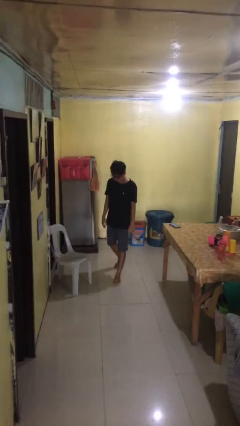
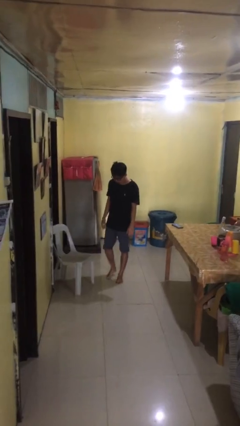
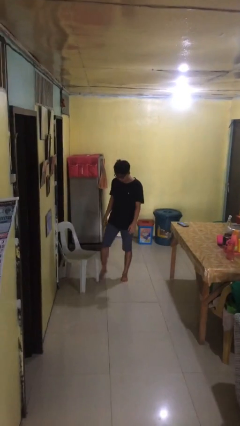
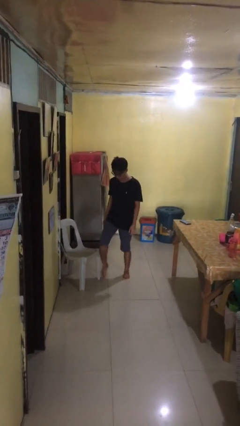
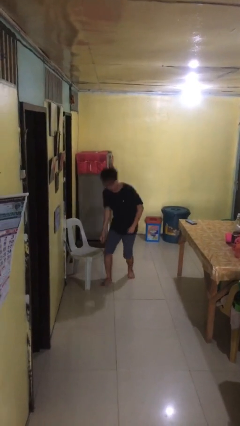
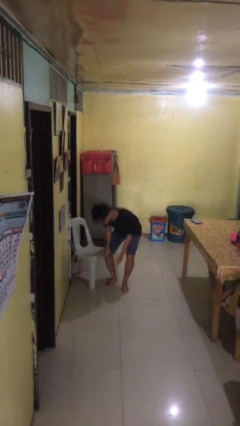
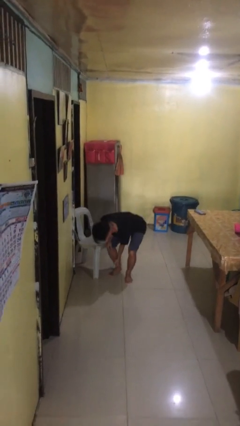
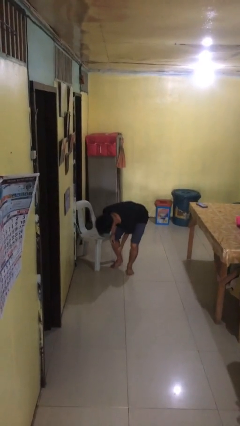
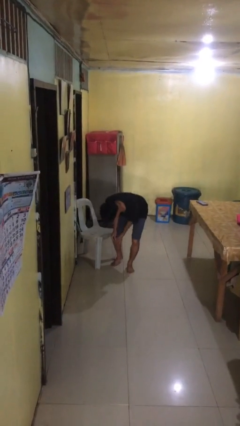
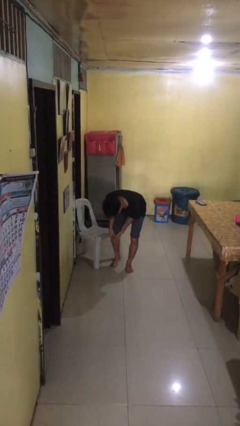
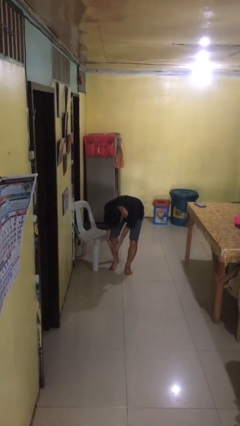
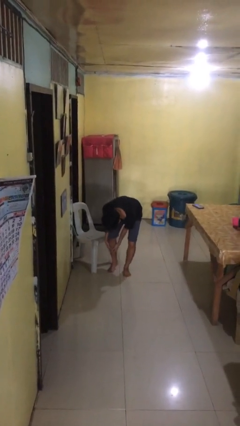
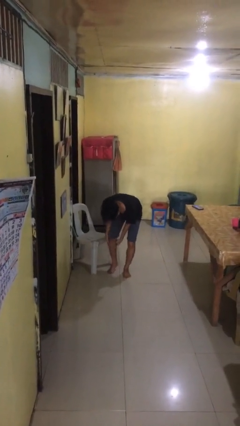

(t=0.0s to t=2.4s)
person stubs toe

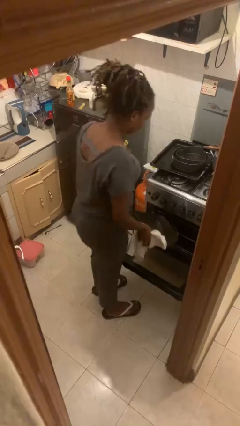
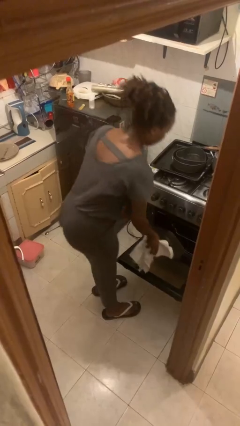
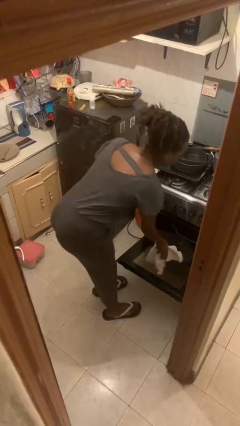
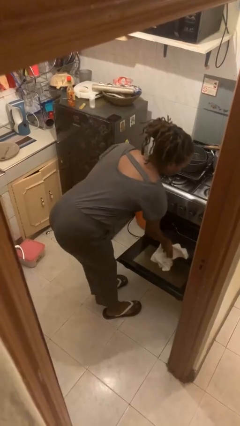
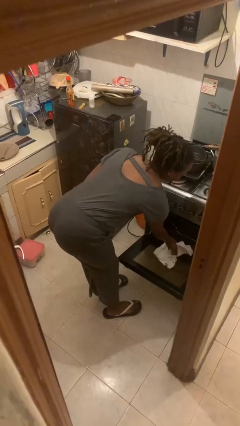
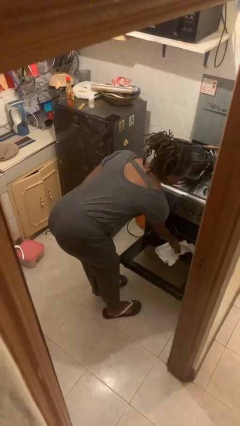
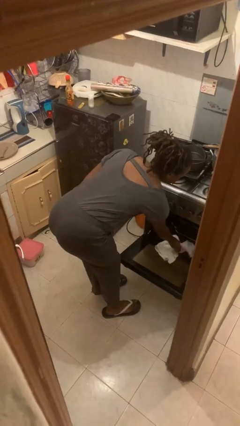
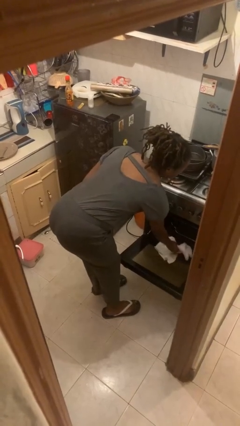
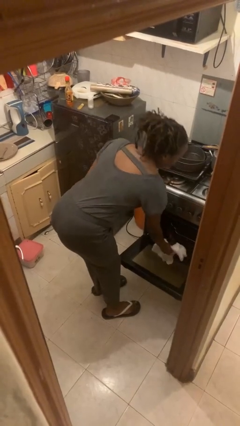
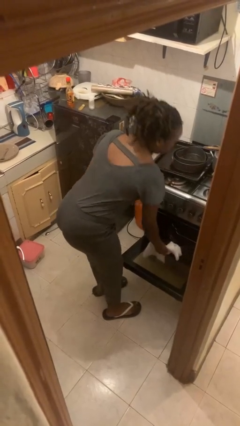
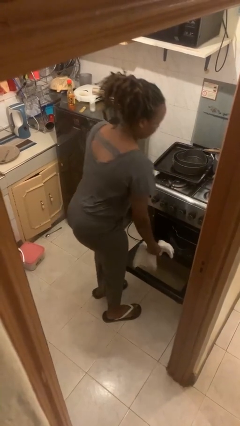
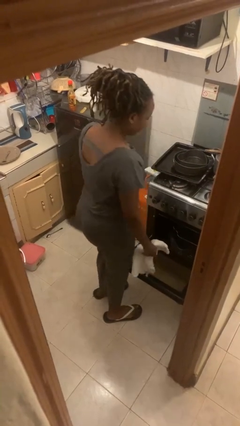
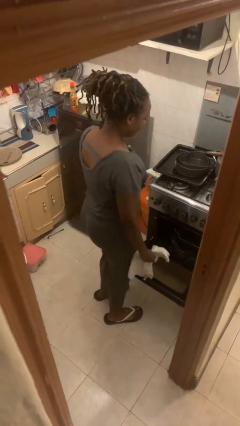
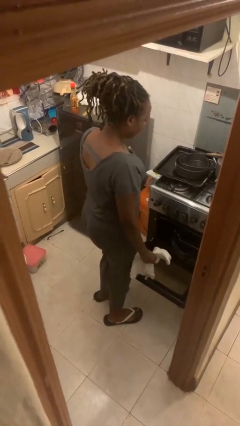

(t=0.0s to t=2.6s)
person puts object into oven

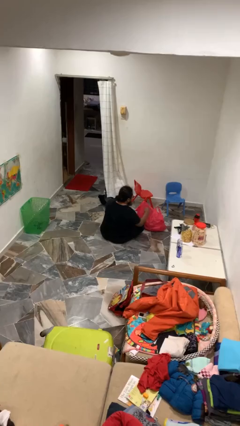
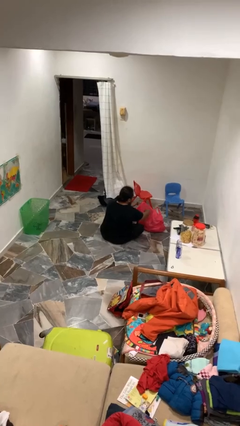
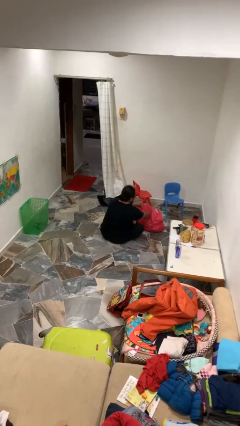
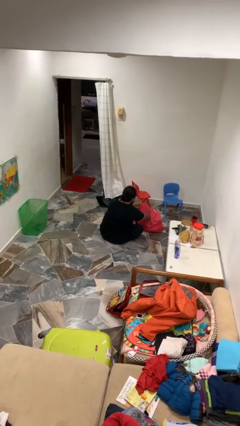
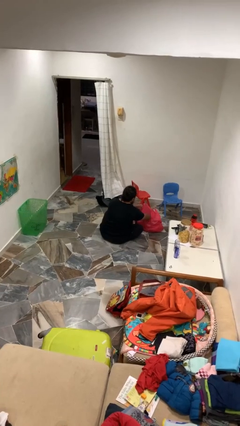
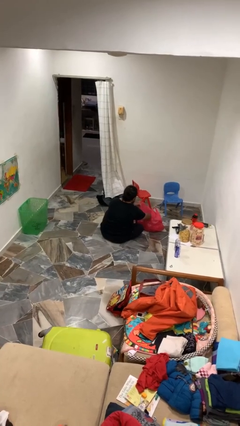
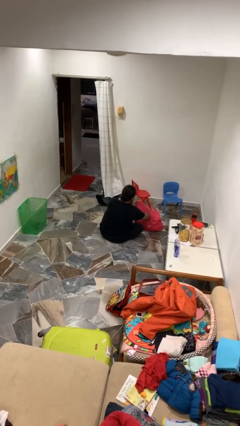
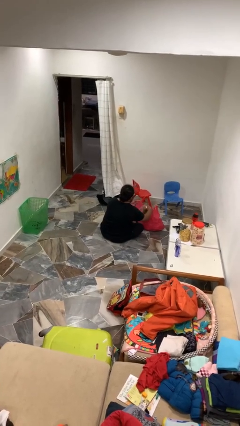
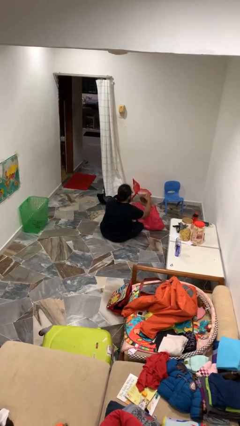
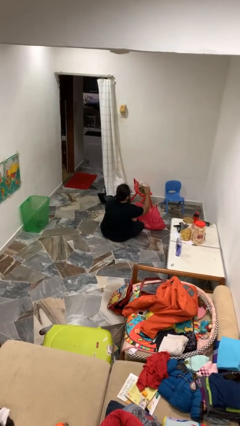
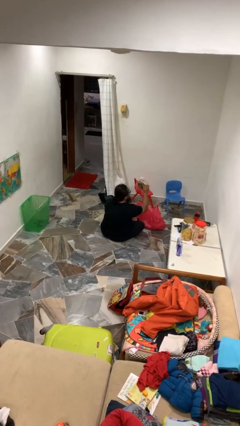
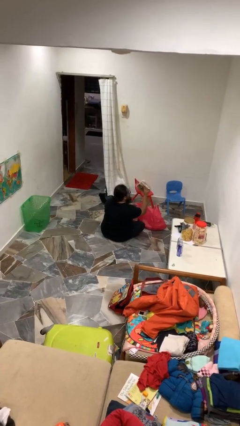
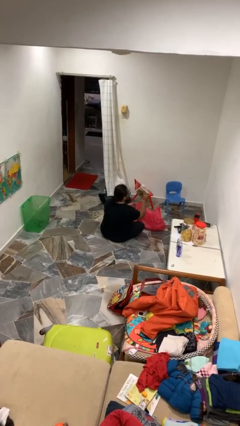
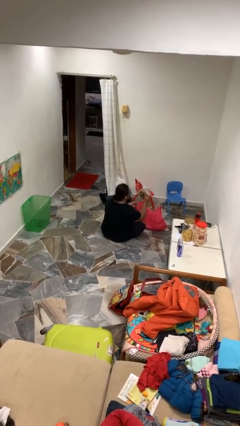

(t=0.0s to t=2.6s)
person takes object from bag

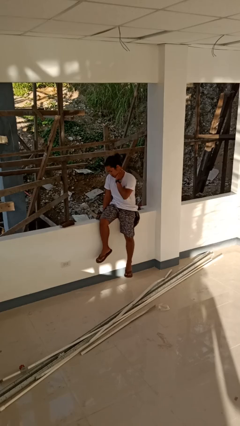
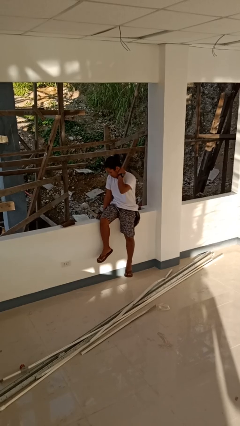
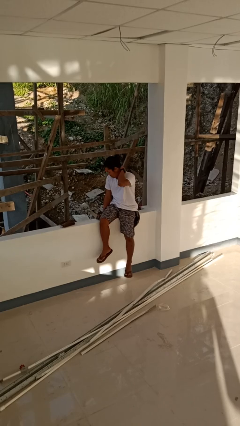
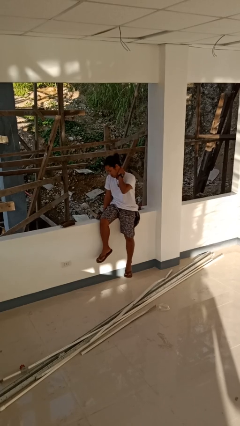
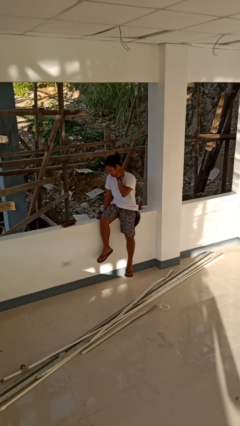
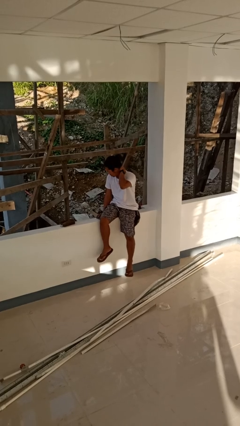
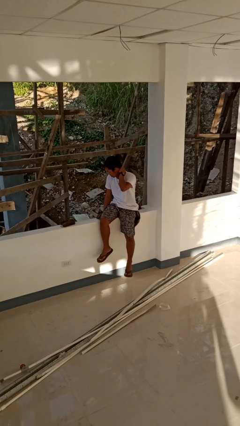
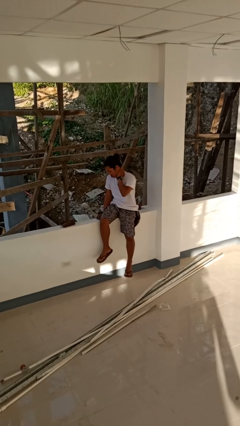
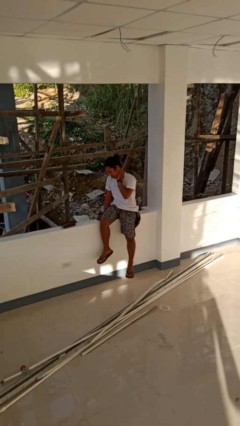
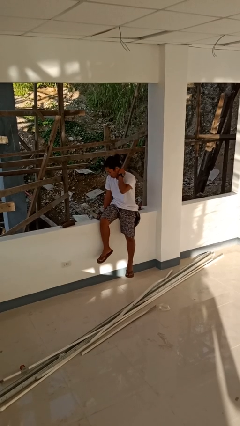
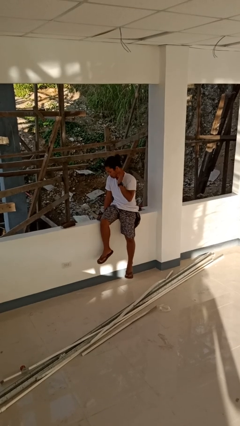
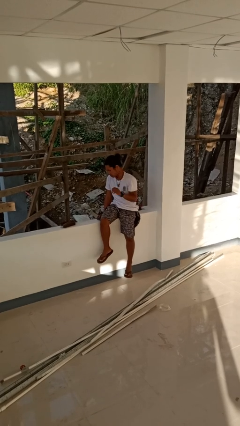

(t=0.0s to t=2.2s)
person rubs neck

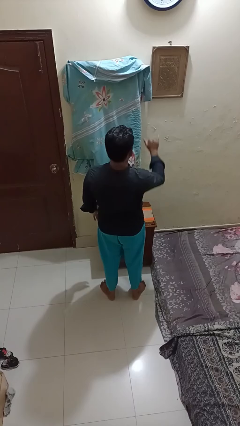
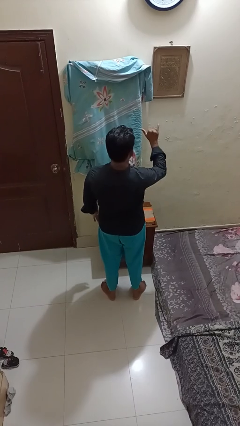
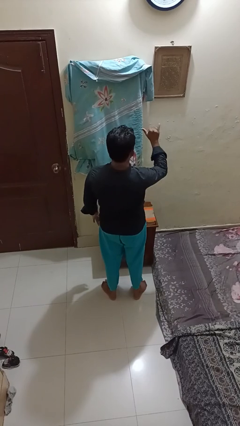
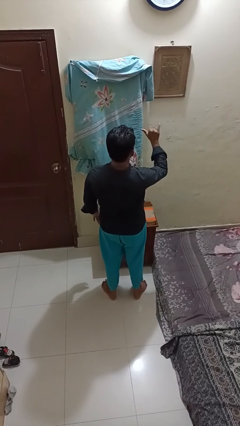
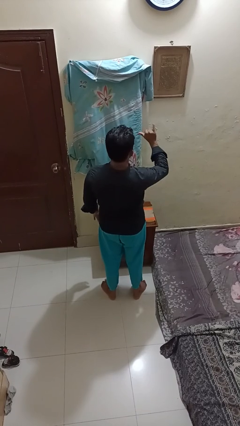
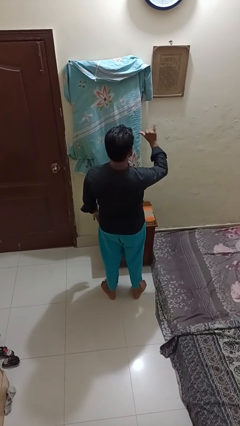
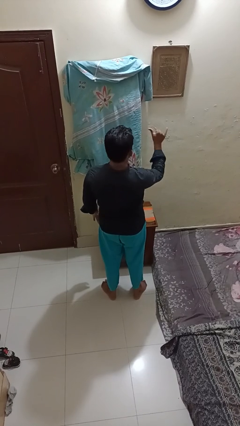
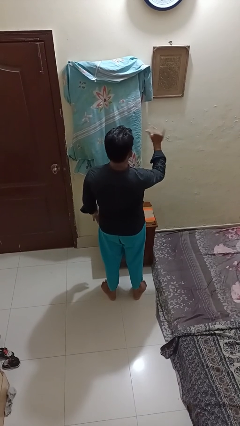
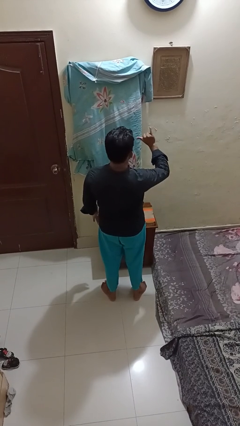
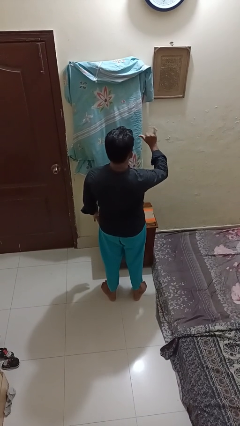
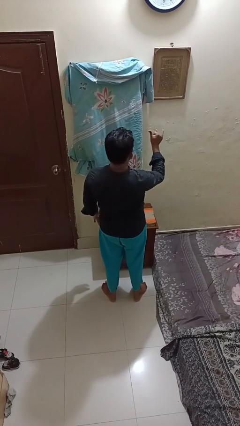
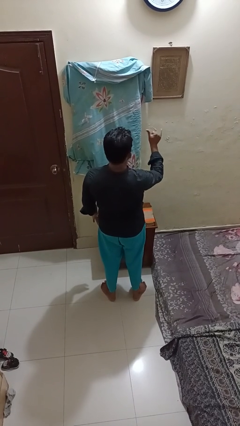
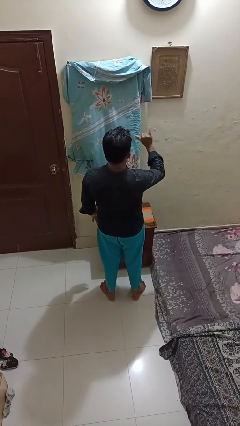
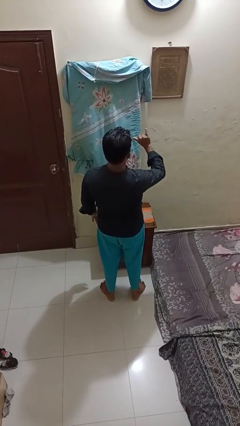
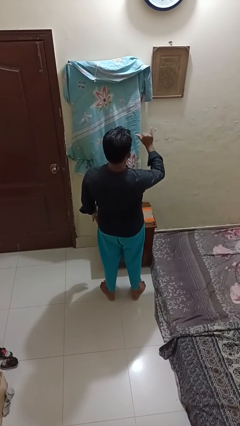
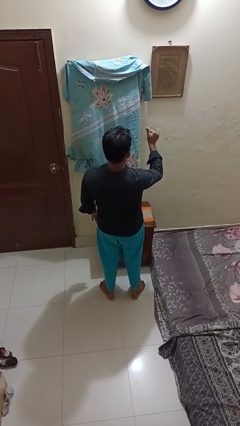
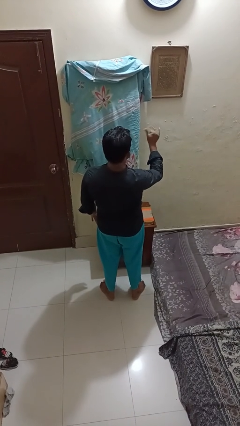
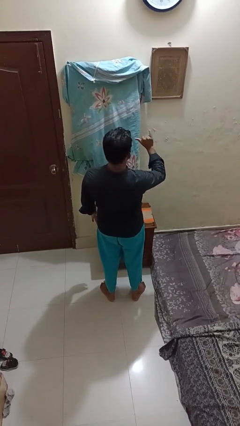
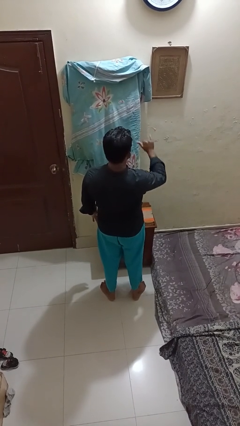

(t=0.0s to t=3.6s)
person gestures hang loose

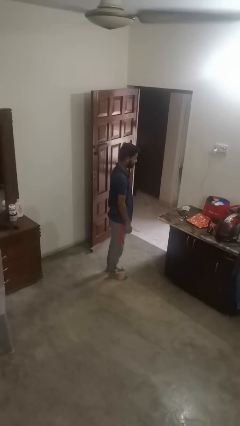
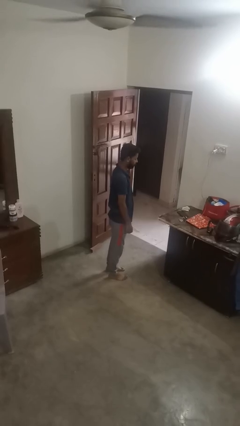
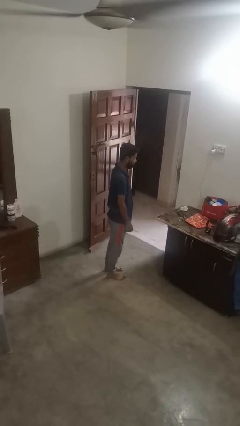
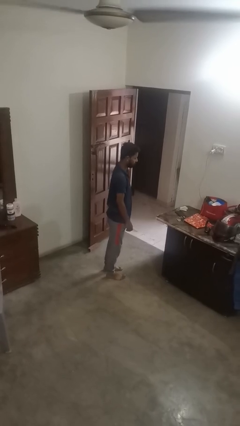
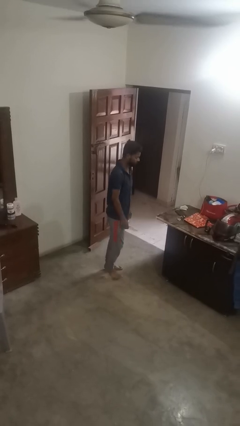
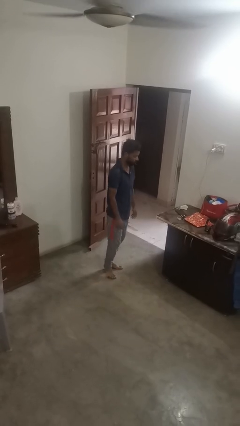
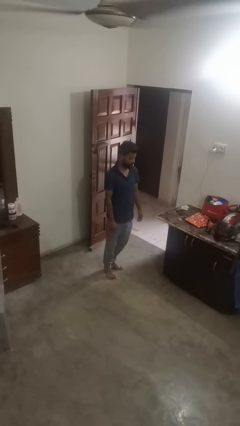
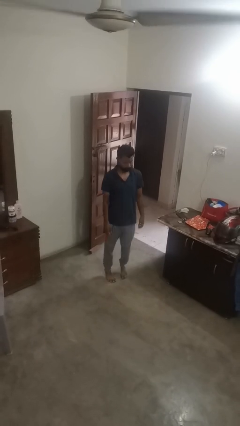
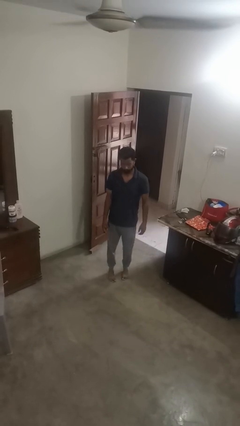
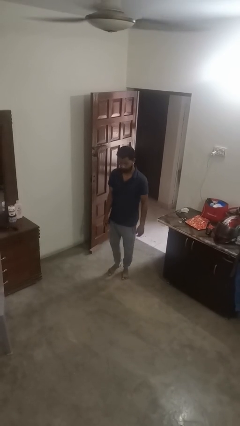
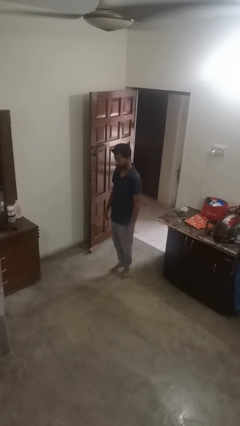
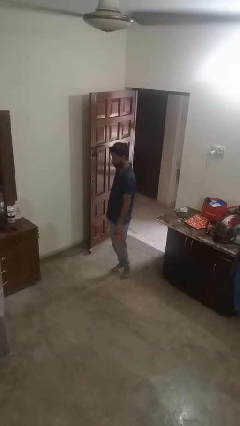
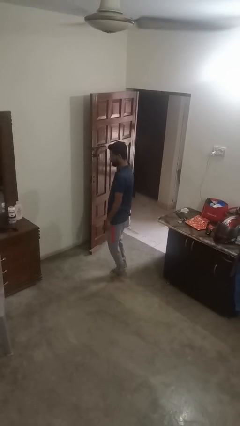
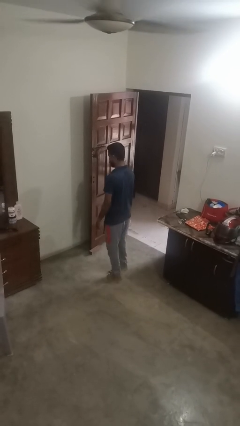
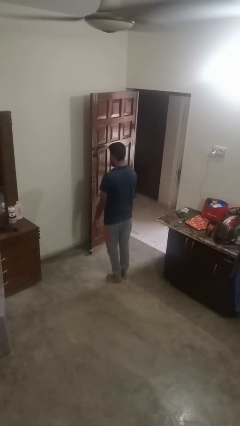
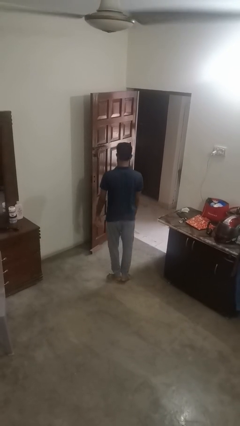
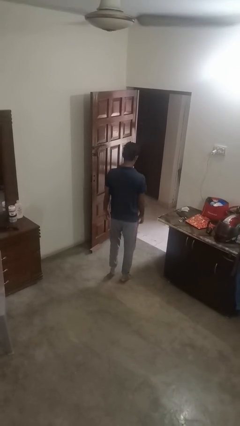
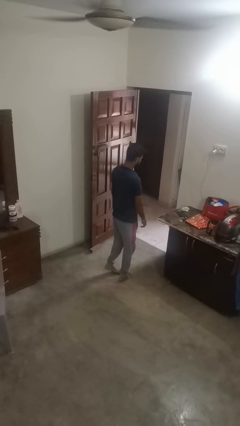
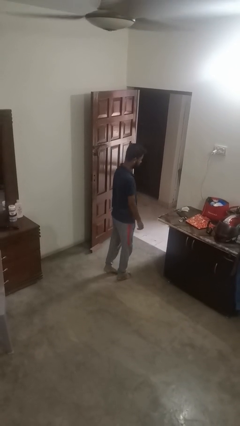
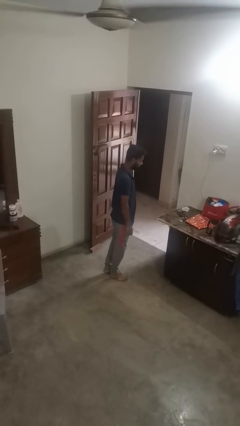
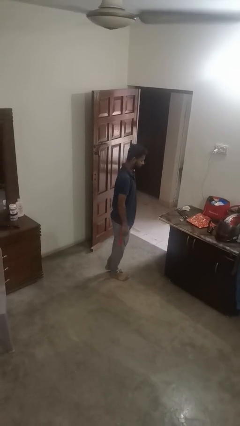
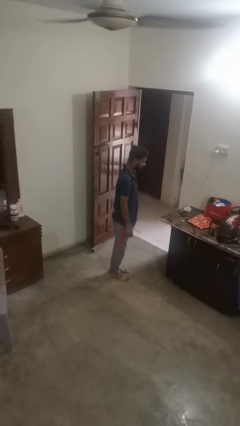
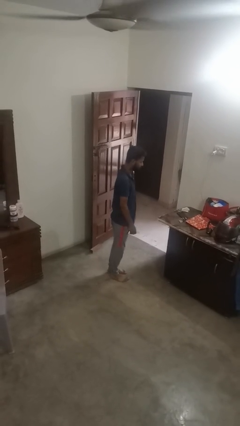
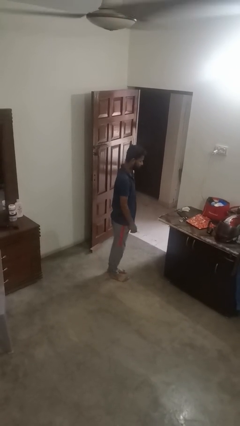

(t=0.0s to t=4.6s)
person twirls
